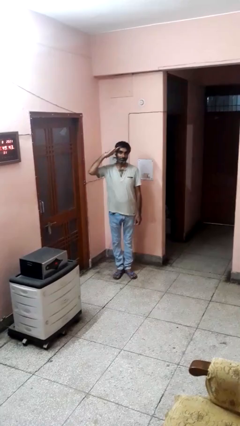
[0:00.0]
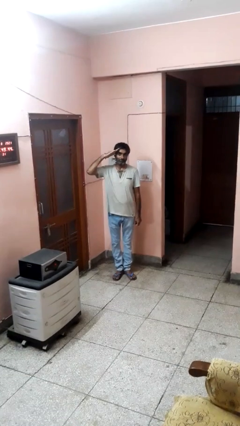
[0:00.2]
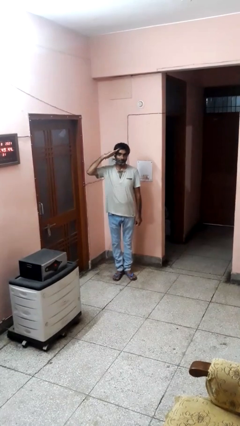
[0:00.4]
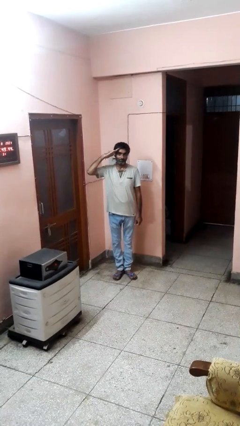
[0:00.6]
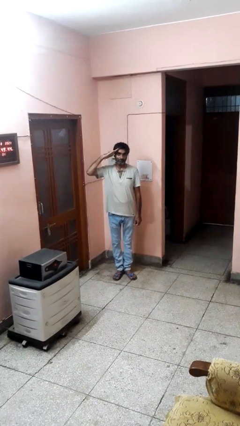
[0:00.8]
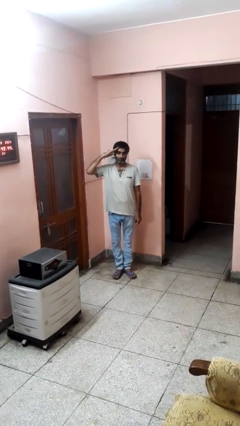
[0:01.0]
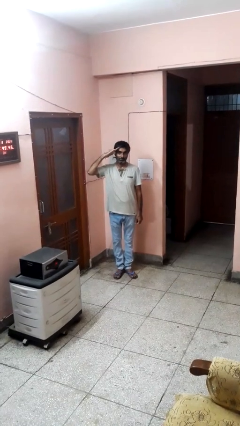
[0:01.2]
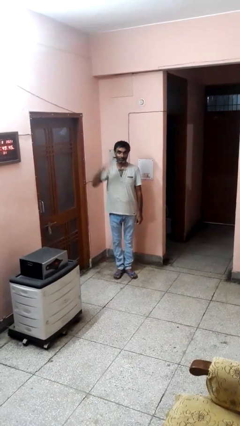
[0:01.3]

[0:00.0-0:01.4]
person salutes

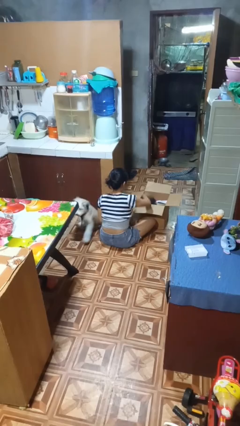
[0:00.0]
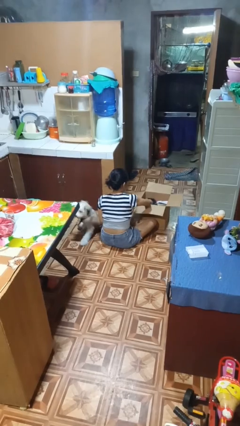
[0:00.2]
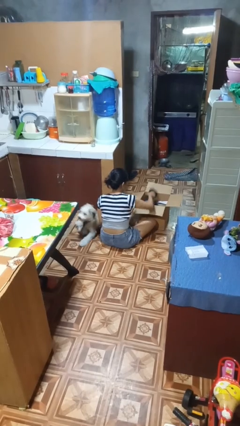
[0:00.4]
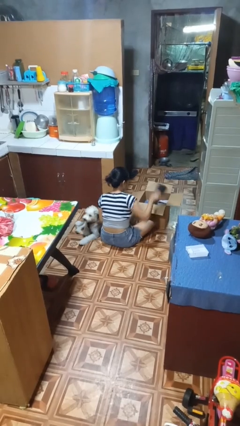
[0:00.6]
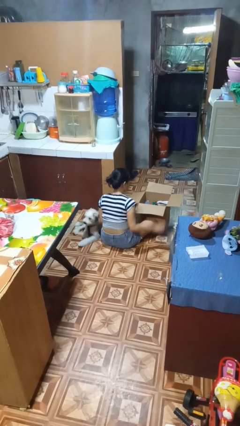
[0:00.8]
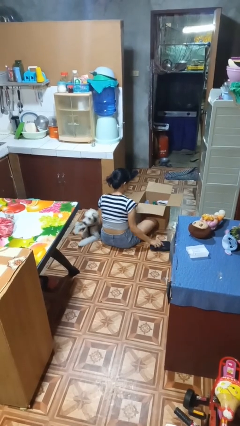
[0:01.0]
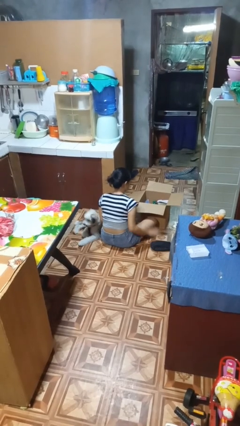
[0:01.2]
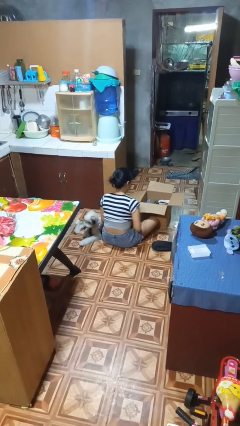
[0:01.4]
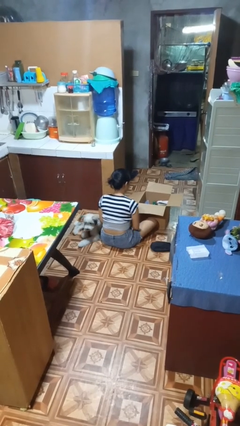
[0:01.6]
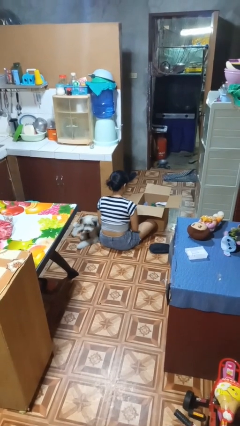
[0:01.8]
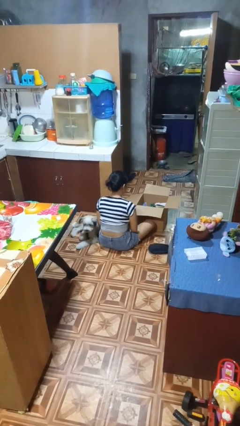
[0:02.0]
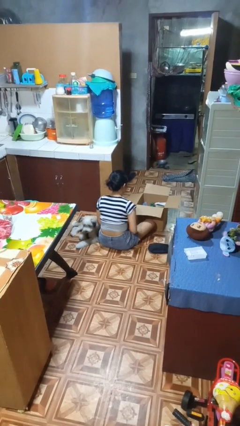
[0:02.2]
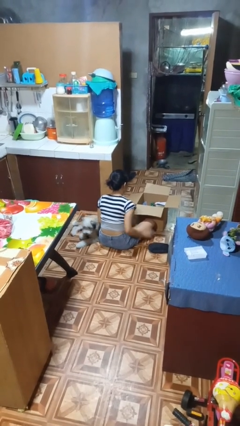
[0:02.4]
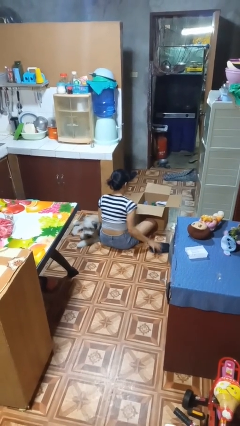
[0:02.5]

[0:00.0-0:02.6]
person takes object from box

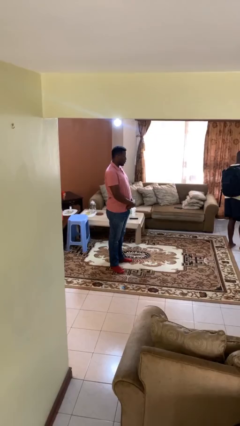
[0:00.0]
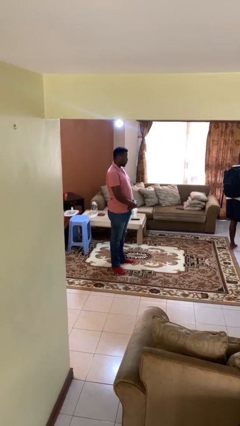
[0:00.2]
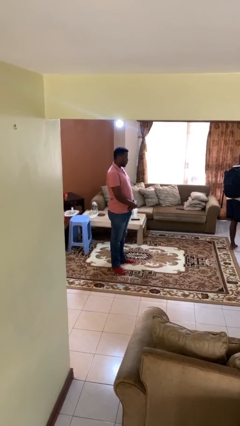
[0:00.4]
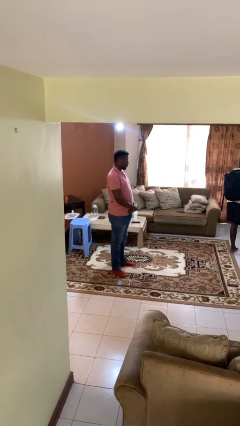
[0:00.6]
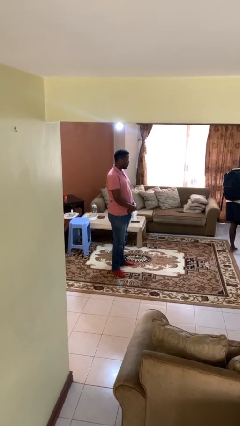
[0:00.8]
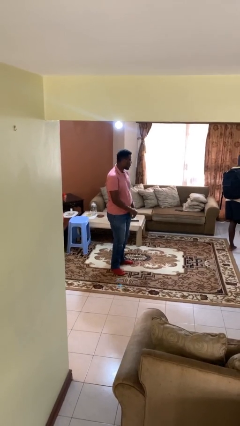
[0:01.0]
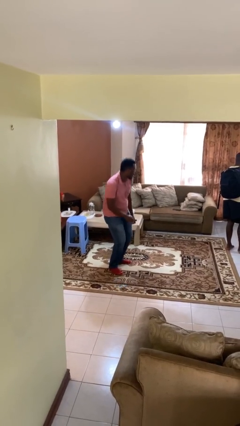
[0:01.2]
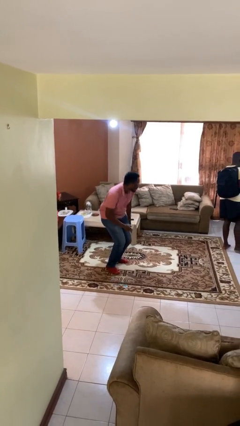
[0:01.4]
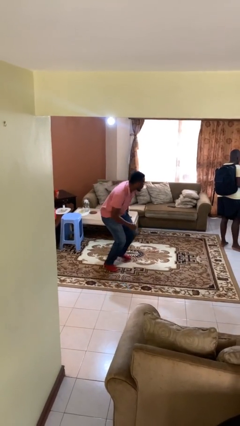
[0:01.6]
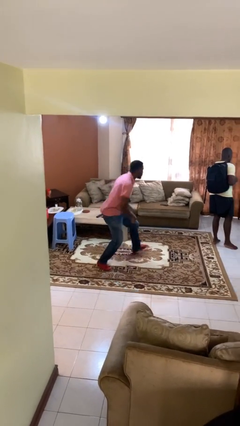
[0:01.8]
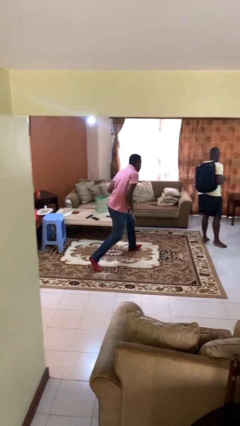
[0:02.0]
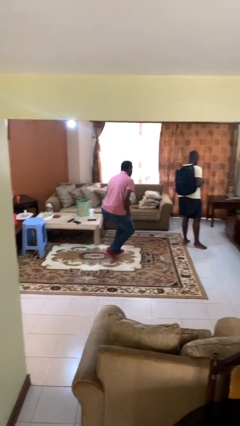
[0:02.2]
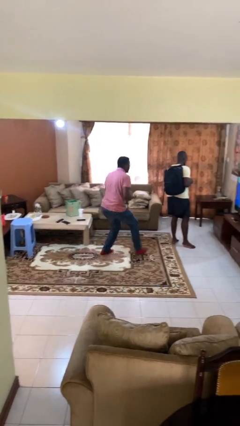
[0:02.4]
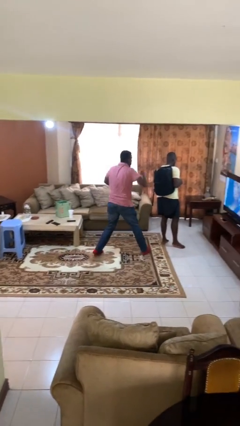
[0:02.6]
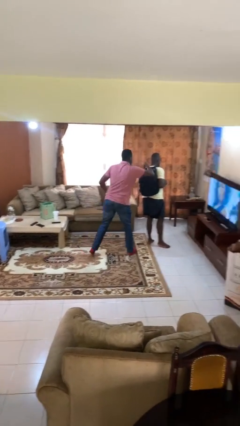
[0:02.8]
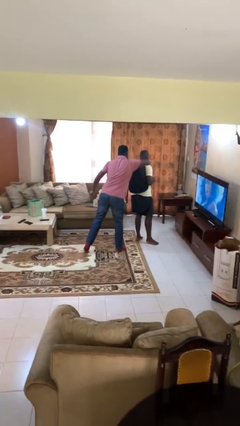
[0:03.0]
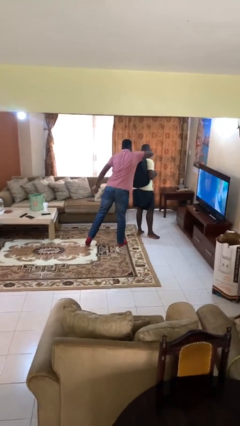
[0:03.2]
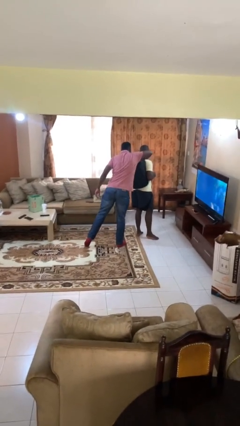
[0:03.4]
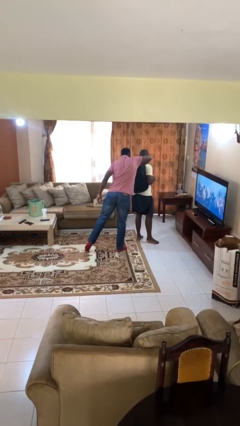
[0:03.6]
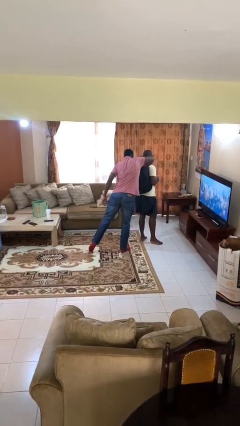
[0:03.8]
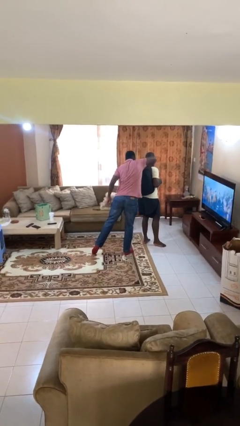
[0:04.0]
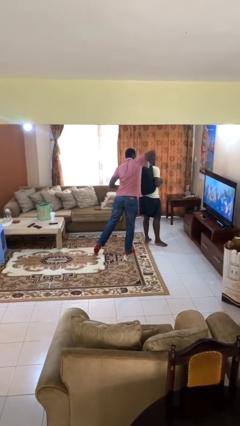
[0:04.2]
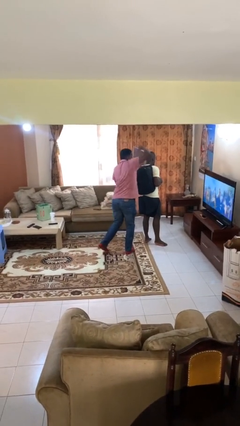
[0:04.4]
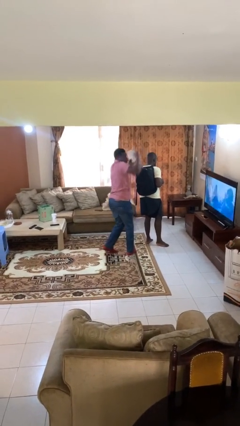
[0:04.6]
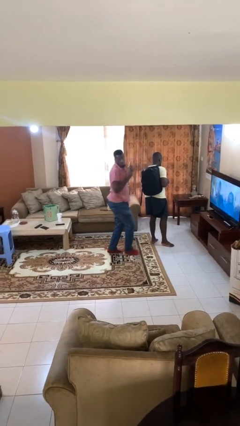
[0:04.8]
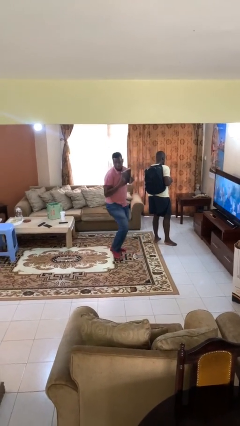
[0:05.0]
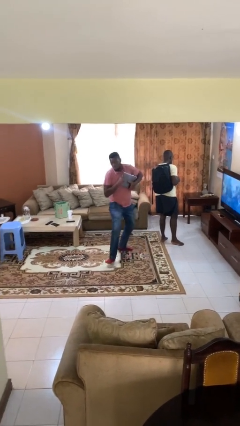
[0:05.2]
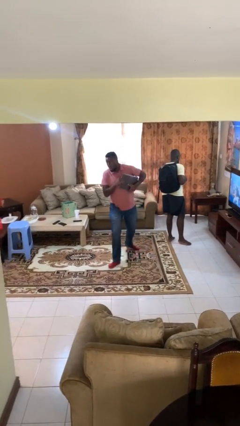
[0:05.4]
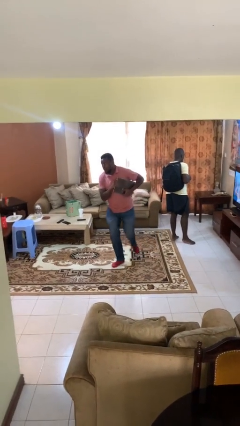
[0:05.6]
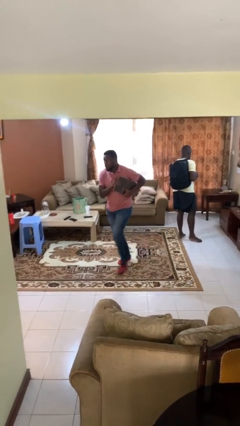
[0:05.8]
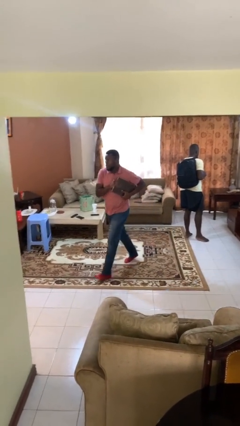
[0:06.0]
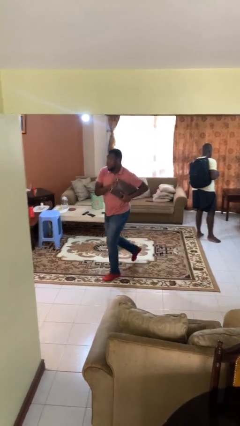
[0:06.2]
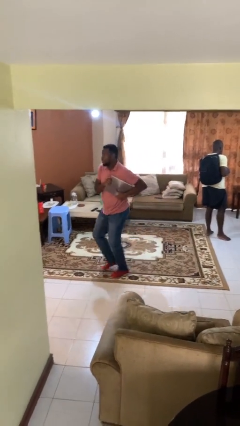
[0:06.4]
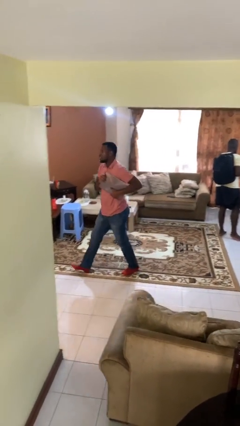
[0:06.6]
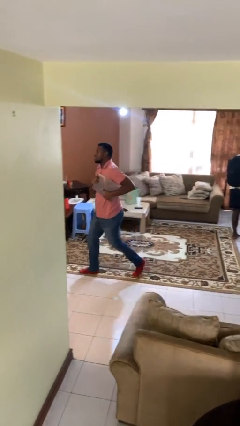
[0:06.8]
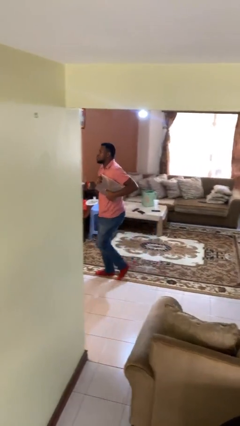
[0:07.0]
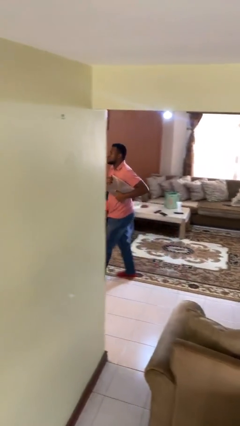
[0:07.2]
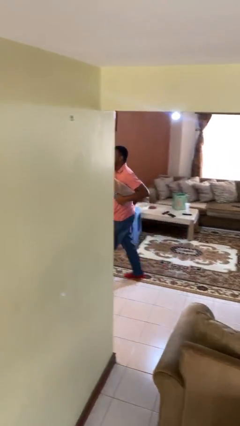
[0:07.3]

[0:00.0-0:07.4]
person steals object from person

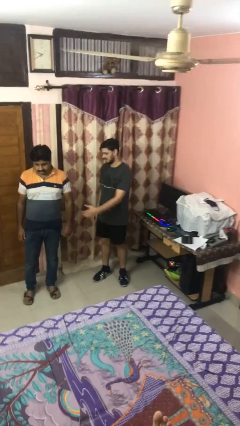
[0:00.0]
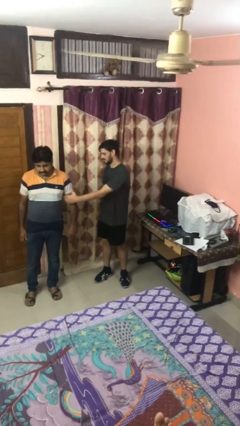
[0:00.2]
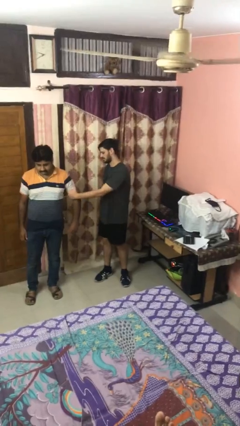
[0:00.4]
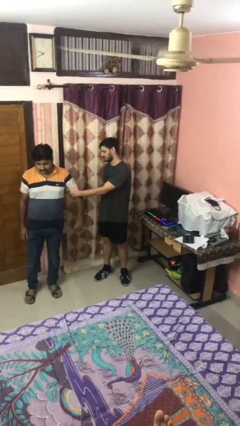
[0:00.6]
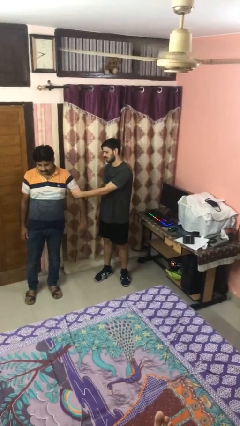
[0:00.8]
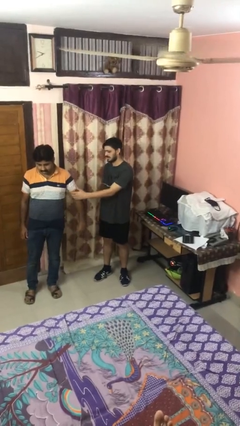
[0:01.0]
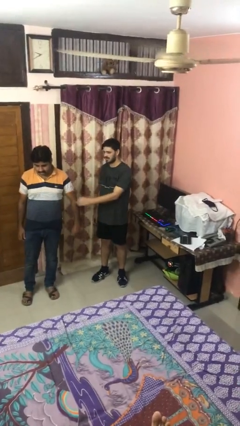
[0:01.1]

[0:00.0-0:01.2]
person grabs person by bicep

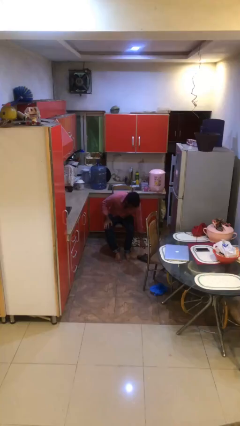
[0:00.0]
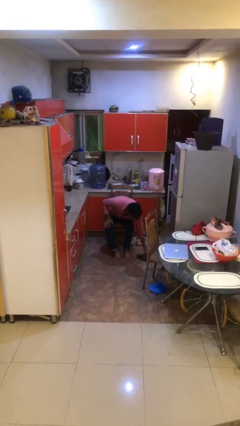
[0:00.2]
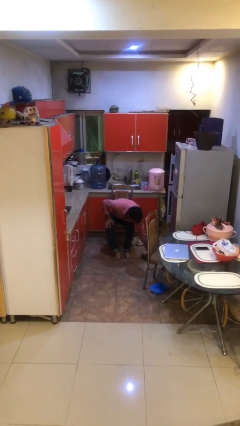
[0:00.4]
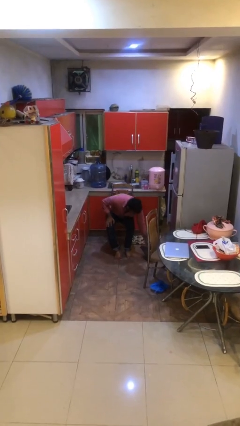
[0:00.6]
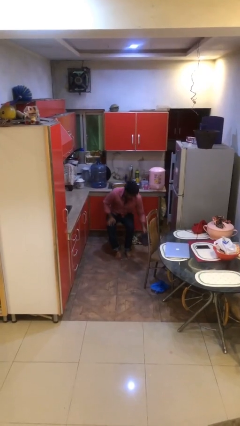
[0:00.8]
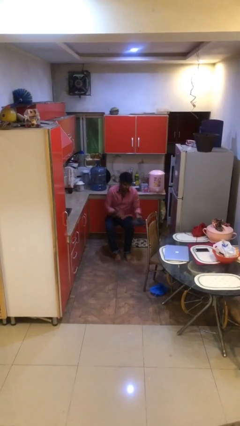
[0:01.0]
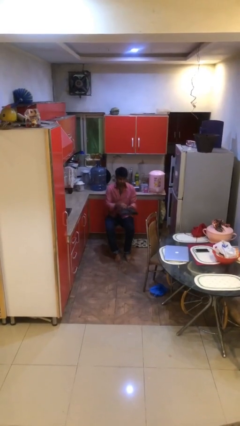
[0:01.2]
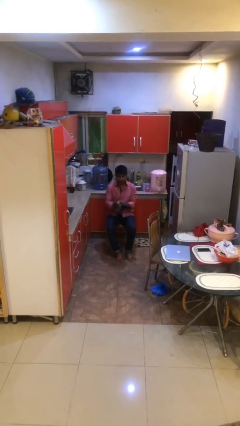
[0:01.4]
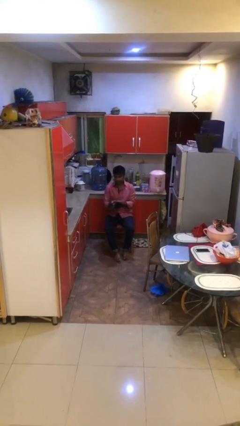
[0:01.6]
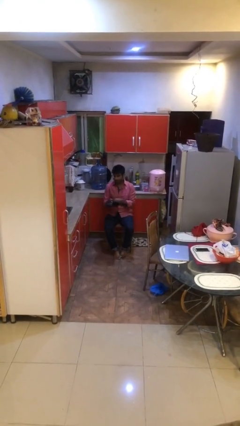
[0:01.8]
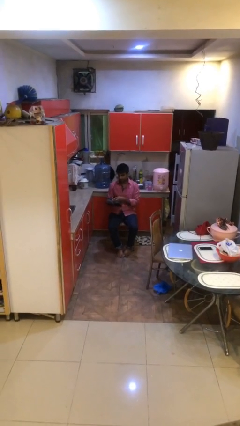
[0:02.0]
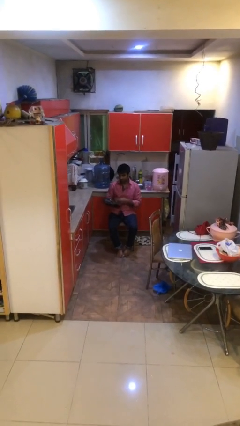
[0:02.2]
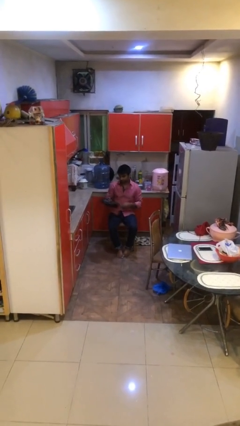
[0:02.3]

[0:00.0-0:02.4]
person picks up object from floor

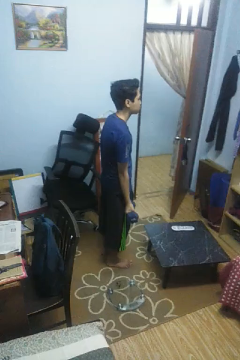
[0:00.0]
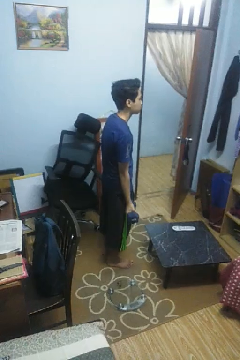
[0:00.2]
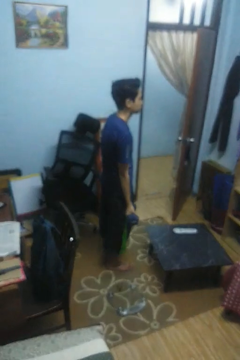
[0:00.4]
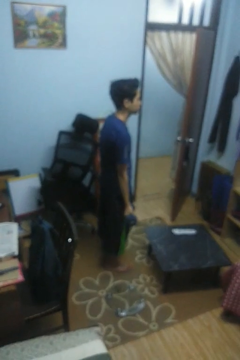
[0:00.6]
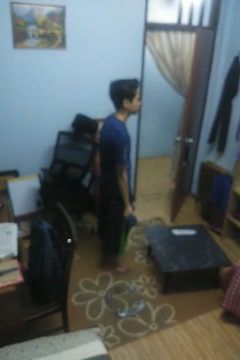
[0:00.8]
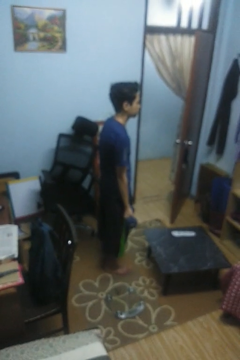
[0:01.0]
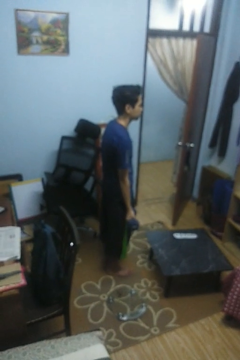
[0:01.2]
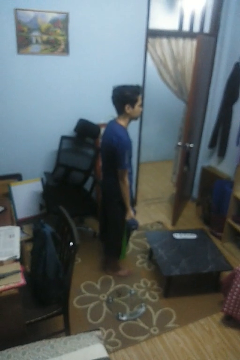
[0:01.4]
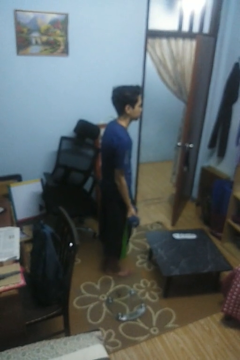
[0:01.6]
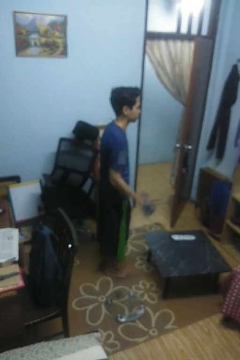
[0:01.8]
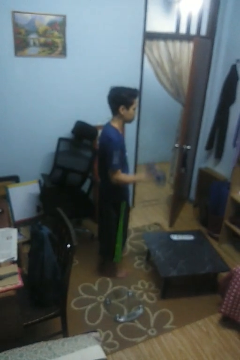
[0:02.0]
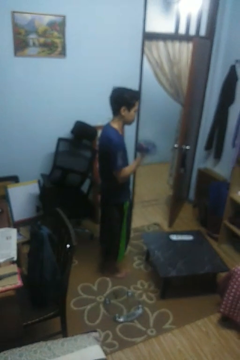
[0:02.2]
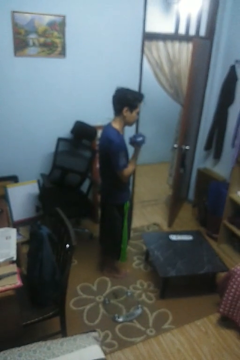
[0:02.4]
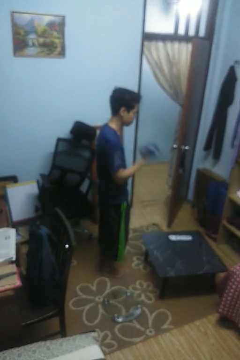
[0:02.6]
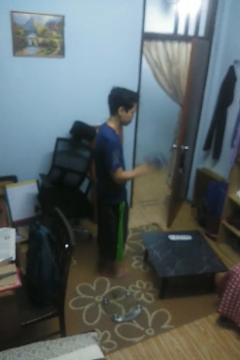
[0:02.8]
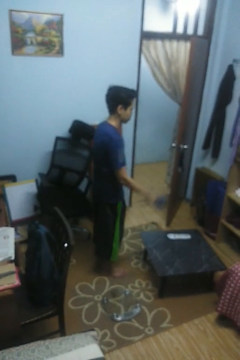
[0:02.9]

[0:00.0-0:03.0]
person lifts dumbbells
